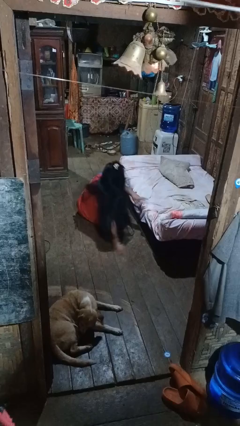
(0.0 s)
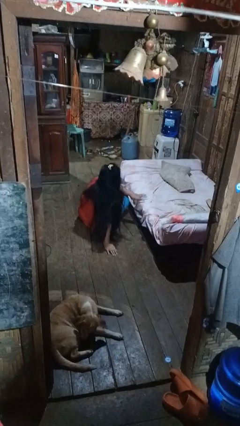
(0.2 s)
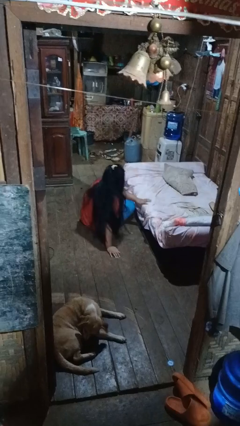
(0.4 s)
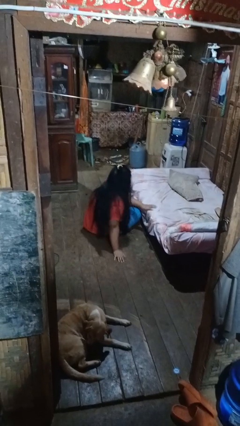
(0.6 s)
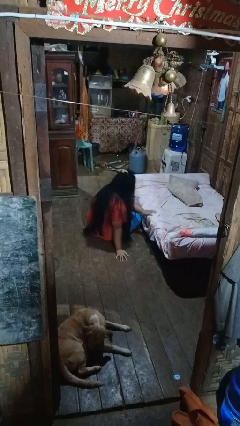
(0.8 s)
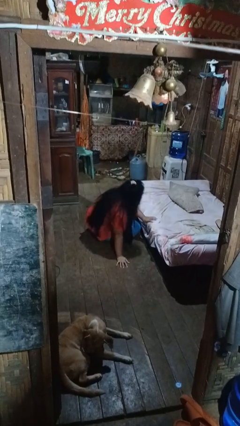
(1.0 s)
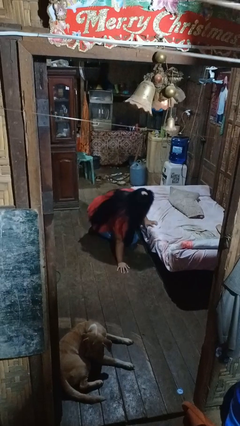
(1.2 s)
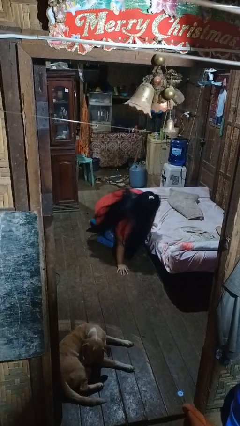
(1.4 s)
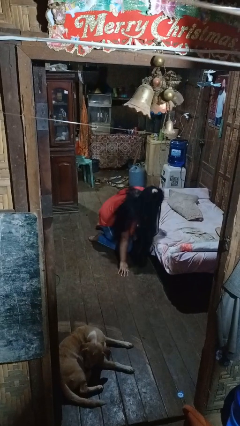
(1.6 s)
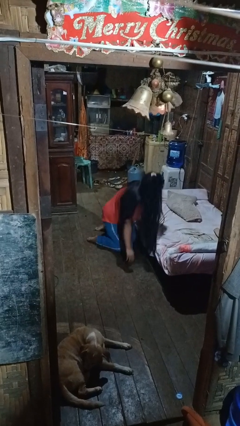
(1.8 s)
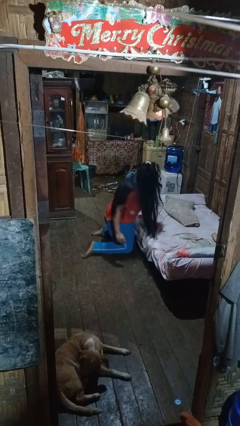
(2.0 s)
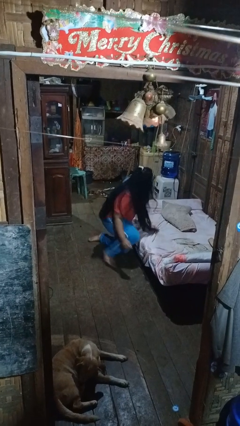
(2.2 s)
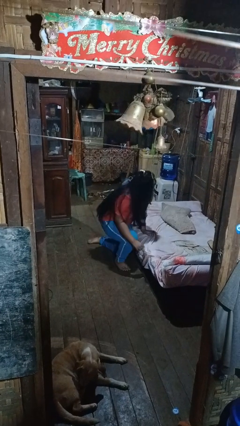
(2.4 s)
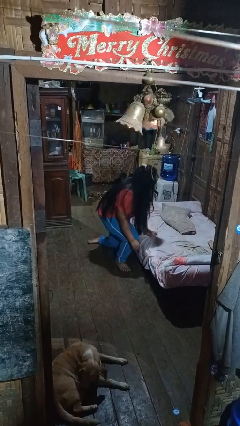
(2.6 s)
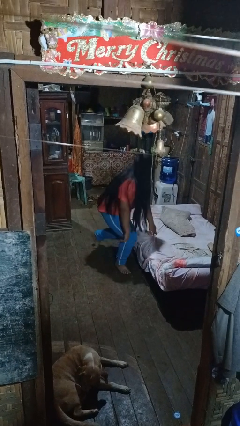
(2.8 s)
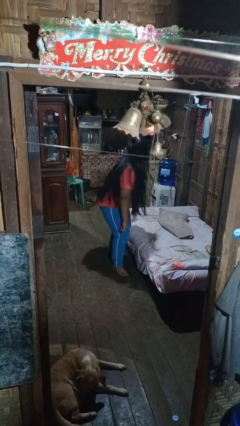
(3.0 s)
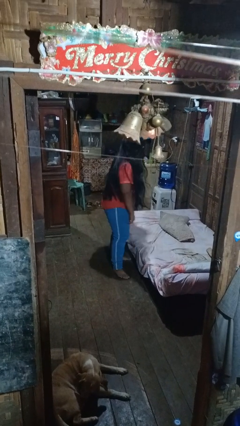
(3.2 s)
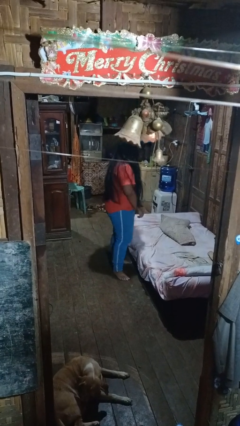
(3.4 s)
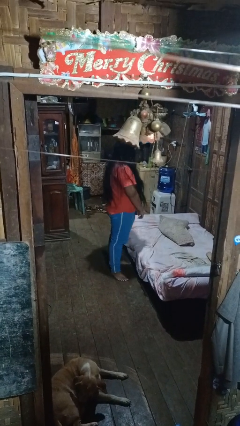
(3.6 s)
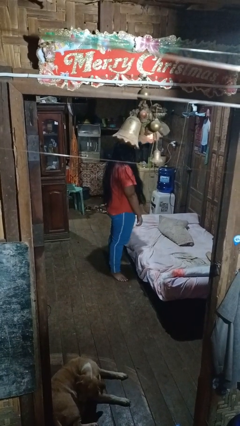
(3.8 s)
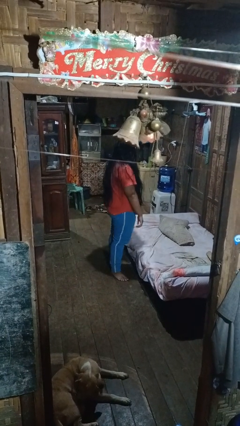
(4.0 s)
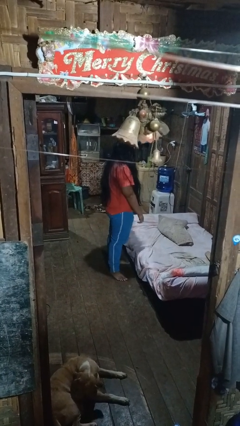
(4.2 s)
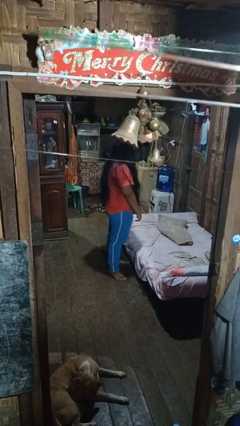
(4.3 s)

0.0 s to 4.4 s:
person stands up from floor

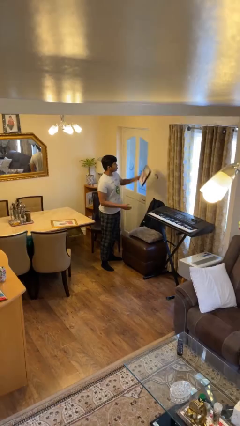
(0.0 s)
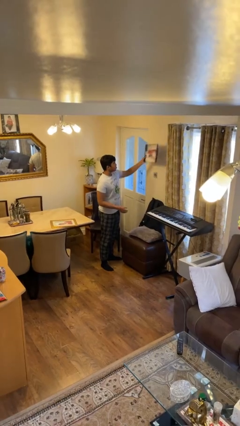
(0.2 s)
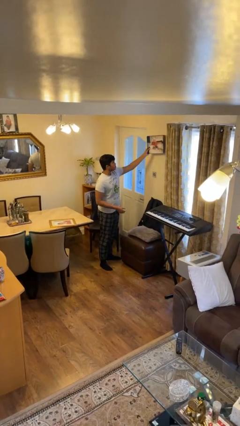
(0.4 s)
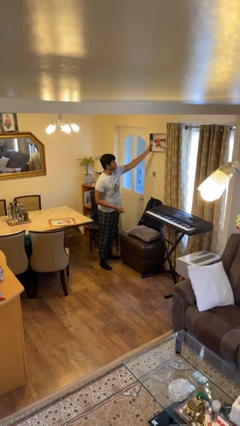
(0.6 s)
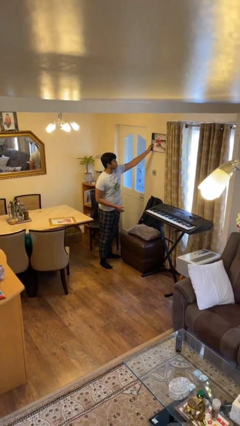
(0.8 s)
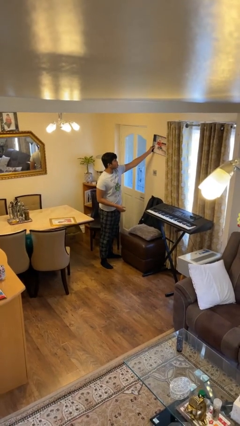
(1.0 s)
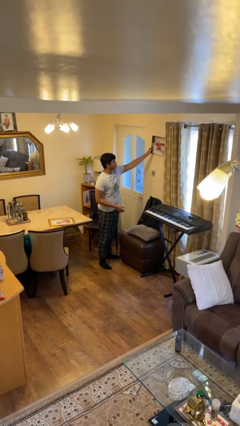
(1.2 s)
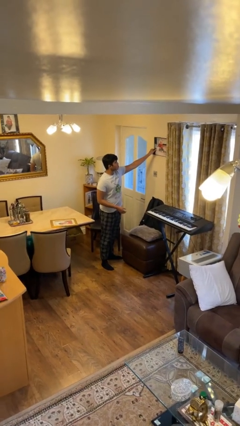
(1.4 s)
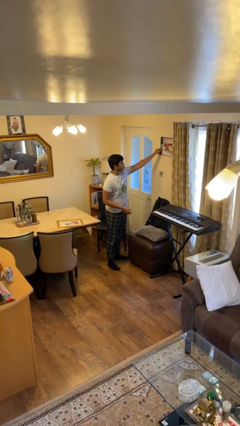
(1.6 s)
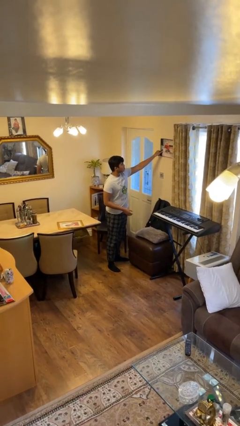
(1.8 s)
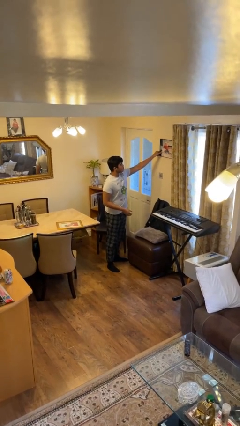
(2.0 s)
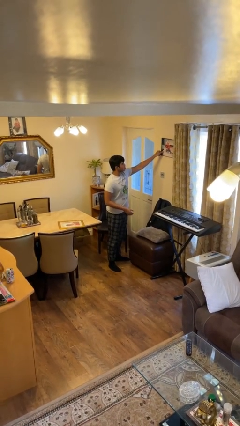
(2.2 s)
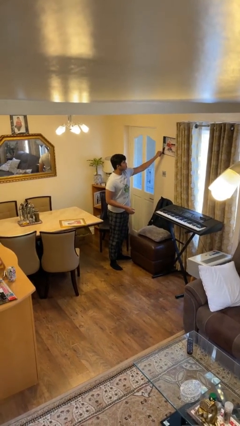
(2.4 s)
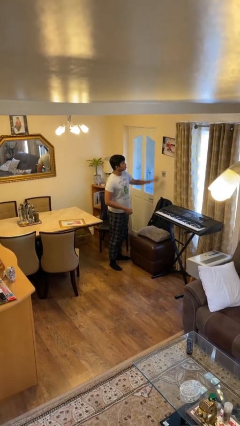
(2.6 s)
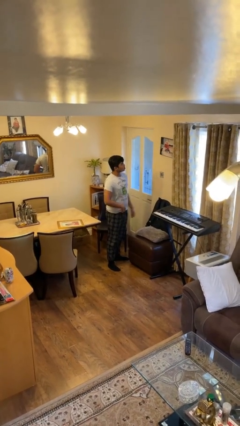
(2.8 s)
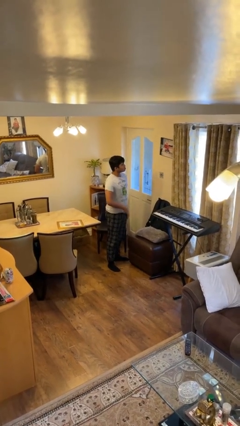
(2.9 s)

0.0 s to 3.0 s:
person takes down picture frame

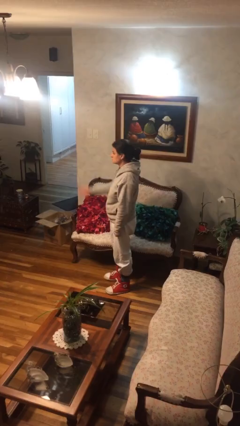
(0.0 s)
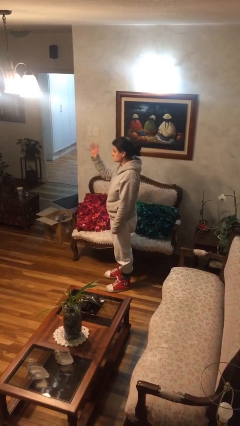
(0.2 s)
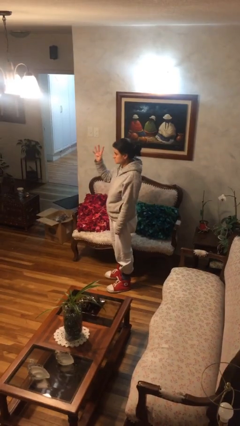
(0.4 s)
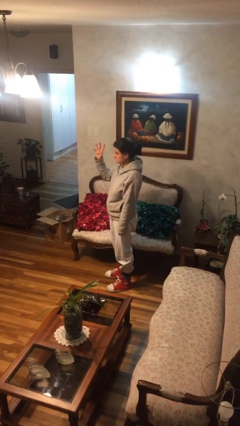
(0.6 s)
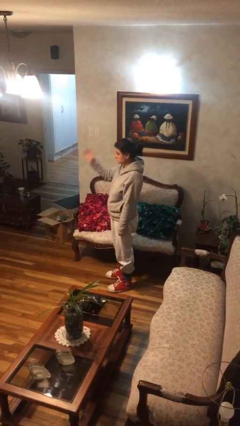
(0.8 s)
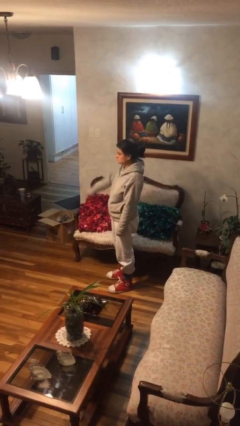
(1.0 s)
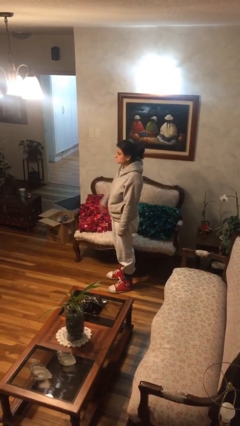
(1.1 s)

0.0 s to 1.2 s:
person gestures number four

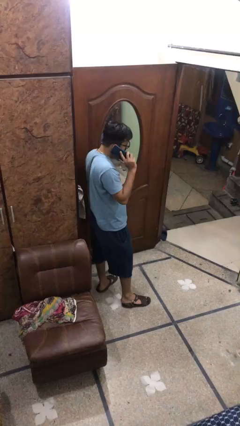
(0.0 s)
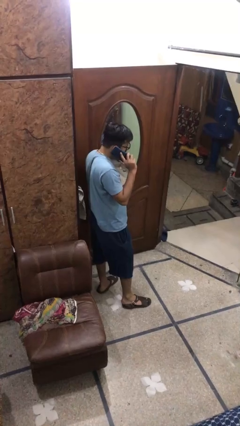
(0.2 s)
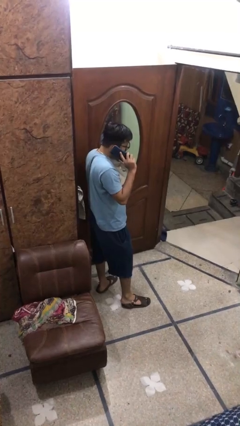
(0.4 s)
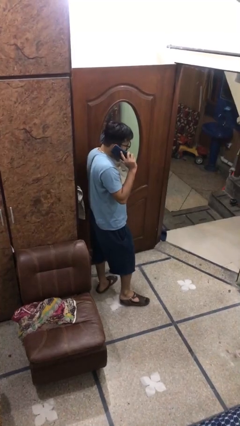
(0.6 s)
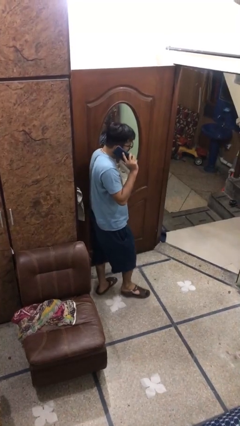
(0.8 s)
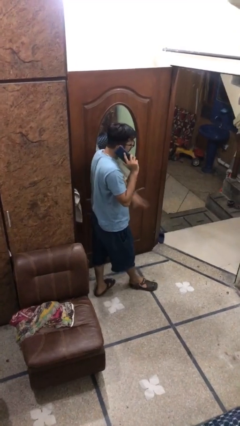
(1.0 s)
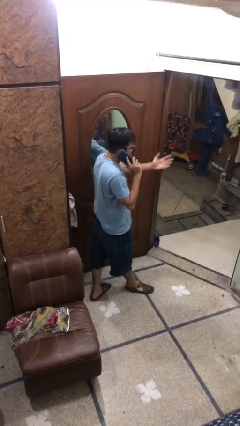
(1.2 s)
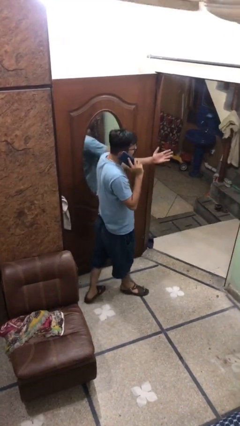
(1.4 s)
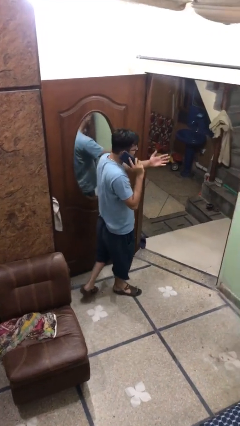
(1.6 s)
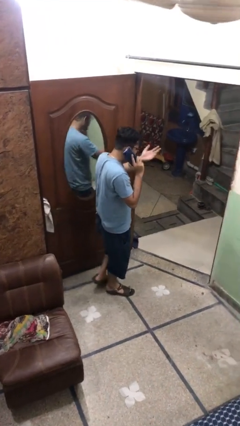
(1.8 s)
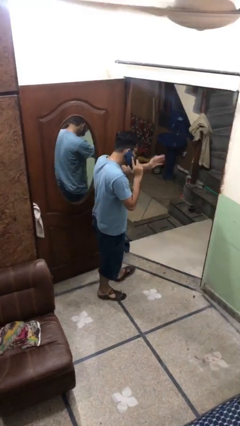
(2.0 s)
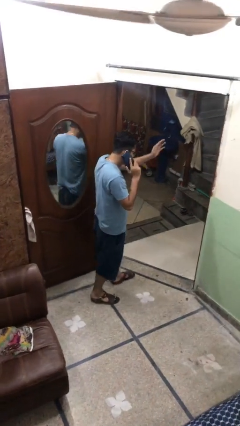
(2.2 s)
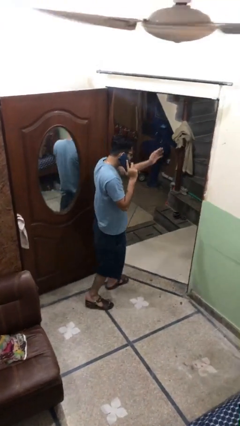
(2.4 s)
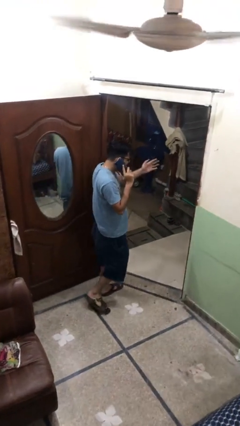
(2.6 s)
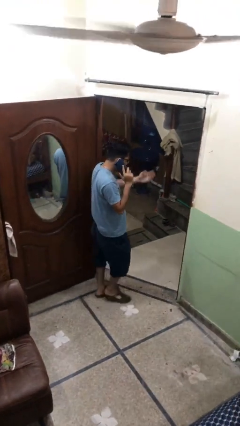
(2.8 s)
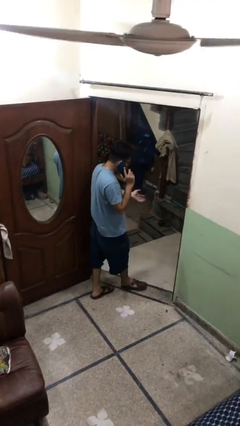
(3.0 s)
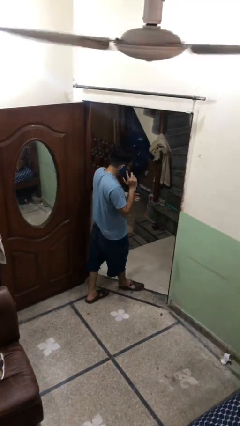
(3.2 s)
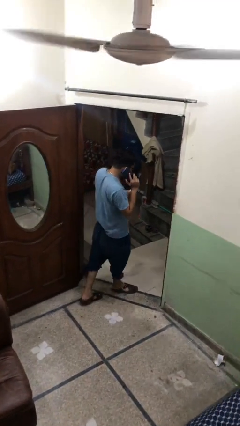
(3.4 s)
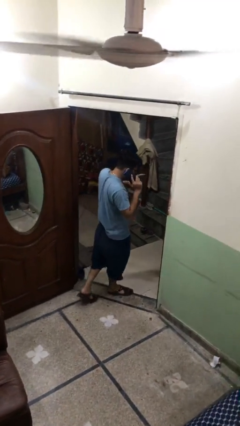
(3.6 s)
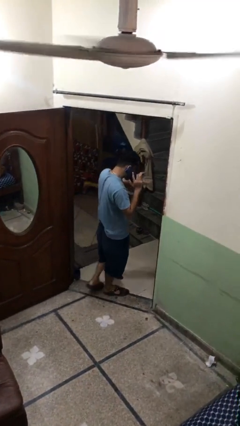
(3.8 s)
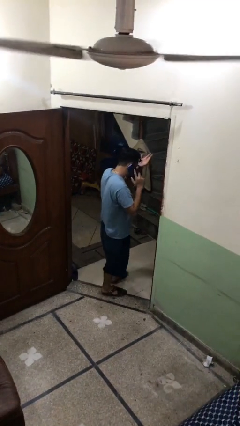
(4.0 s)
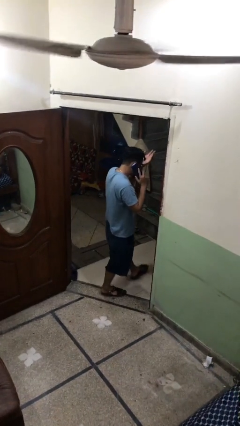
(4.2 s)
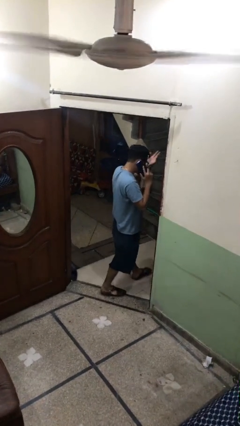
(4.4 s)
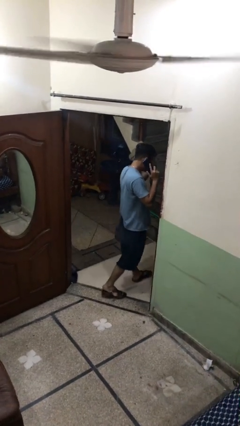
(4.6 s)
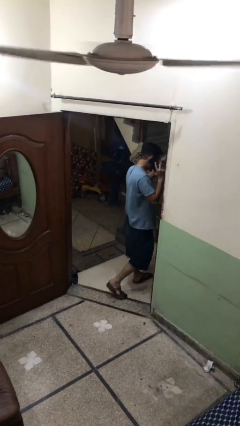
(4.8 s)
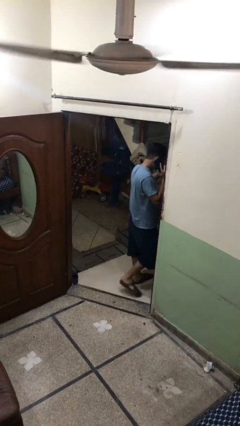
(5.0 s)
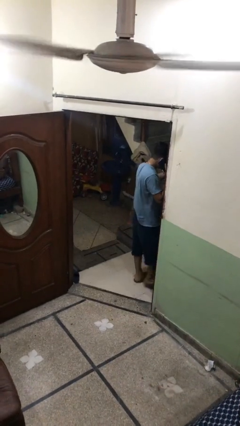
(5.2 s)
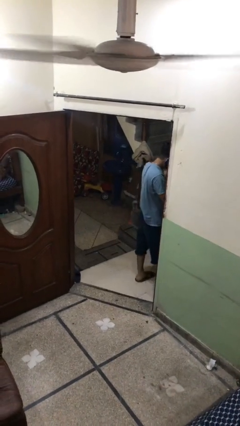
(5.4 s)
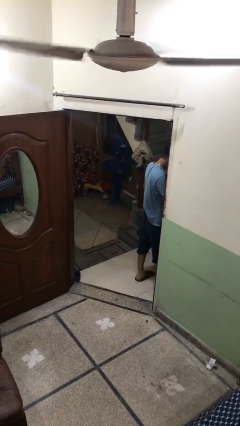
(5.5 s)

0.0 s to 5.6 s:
person exits scene through structure

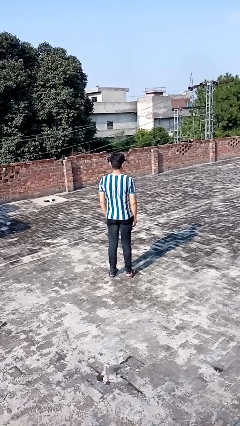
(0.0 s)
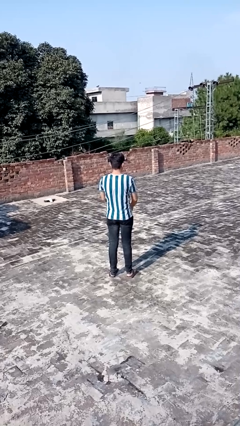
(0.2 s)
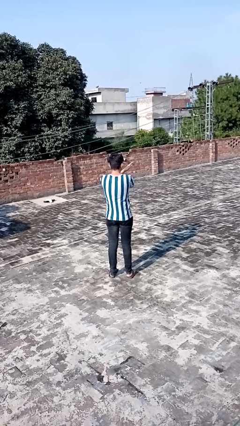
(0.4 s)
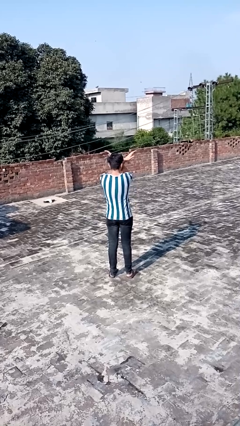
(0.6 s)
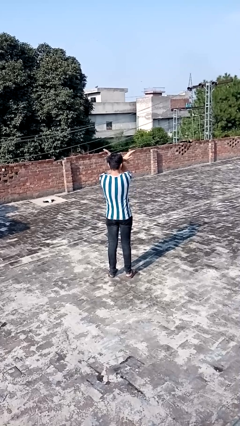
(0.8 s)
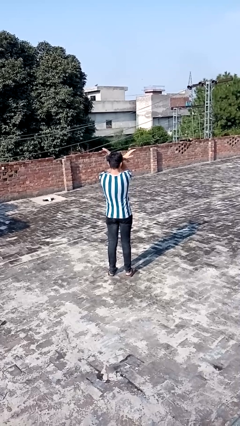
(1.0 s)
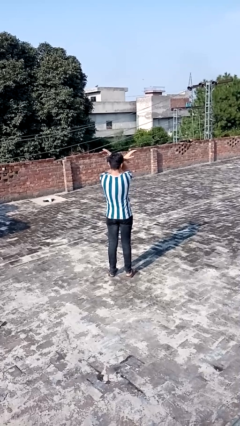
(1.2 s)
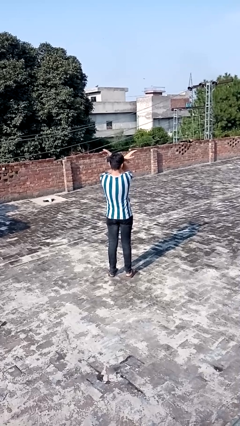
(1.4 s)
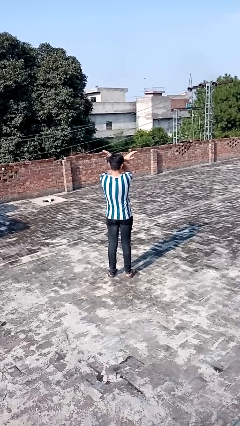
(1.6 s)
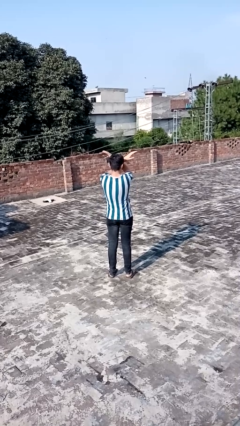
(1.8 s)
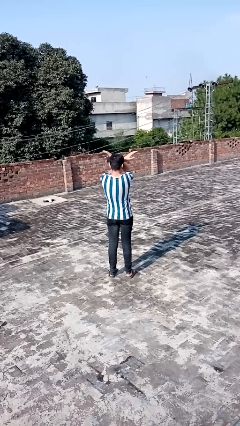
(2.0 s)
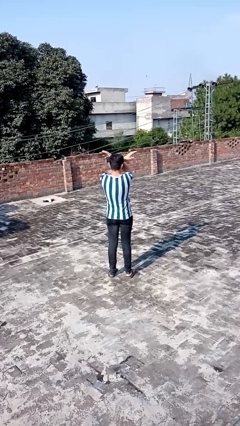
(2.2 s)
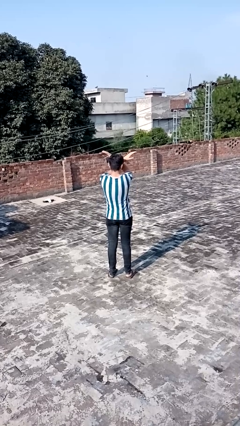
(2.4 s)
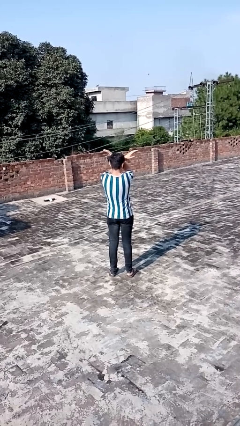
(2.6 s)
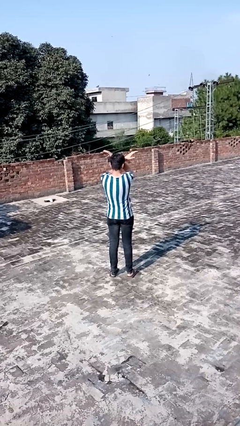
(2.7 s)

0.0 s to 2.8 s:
person gestures arms x

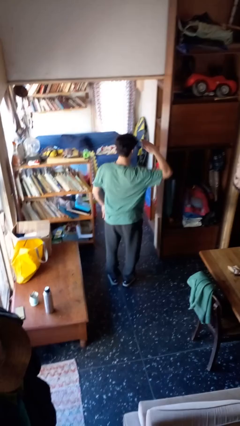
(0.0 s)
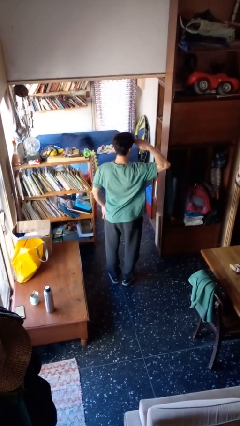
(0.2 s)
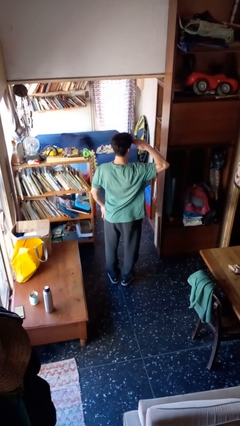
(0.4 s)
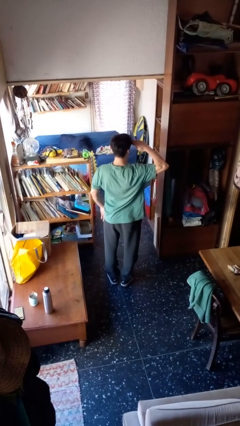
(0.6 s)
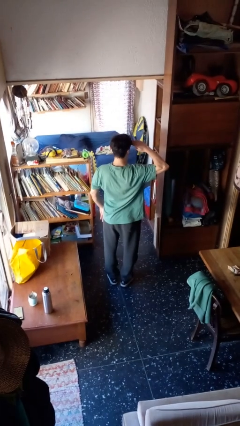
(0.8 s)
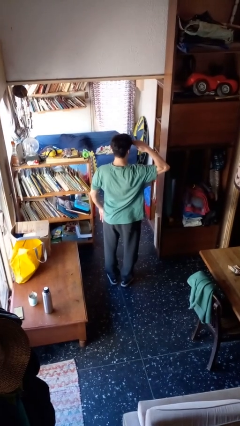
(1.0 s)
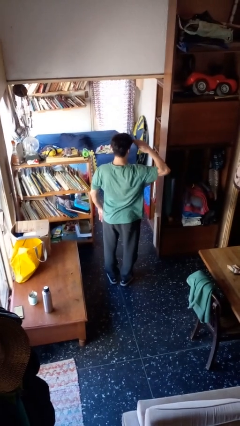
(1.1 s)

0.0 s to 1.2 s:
person salutes
